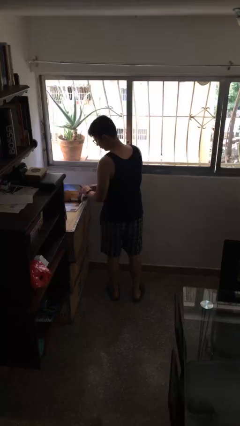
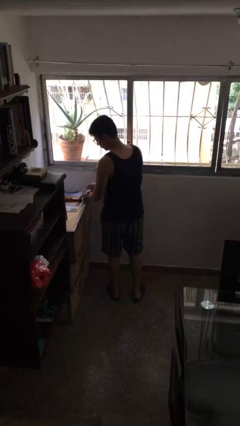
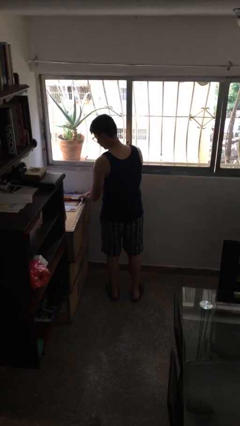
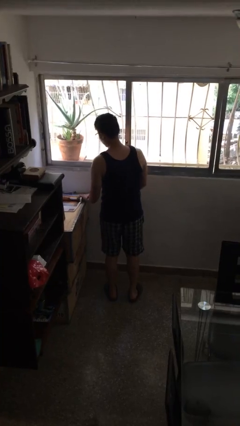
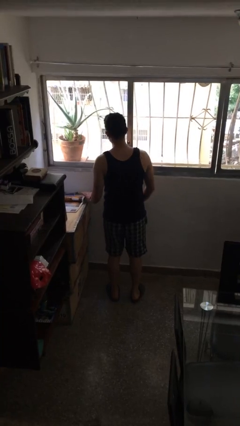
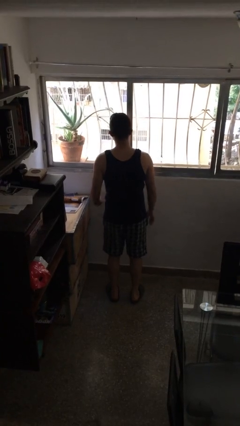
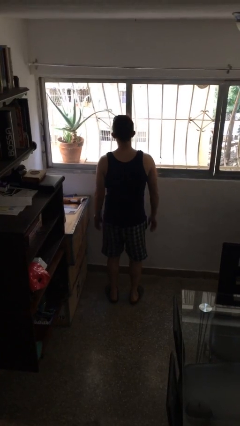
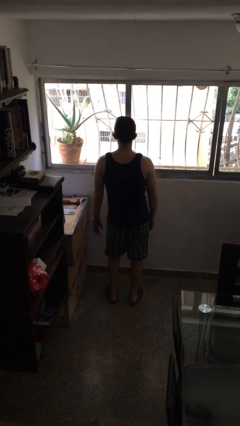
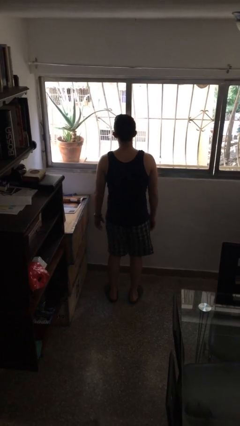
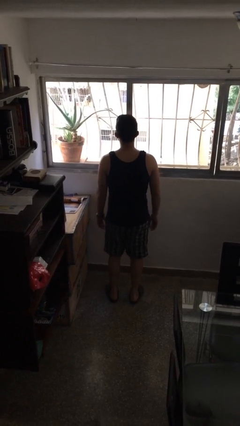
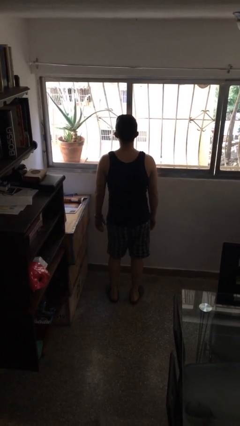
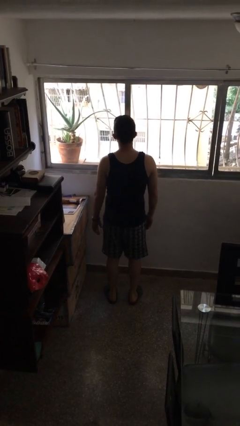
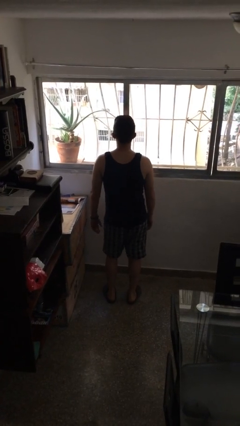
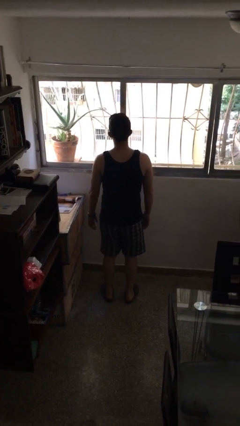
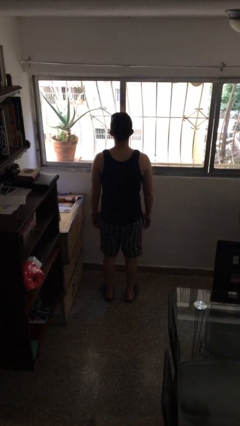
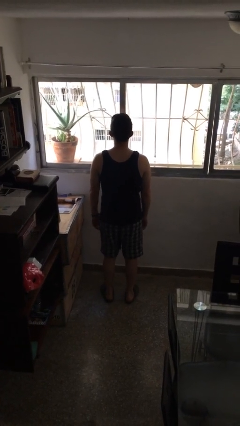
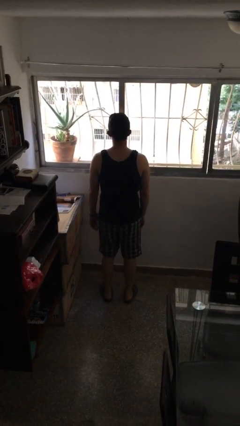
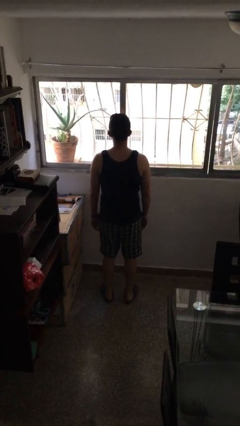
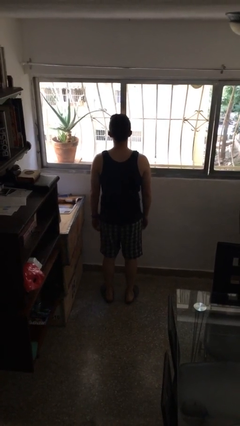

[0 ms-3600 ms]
person wiggles hips

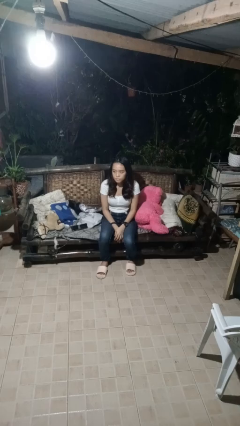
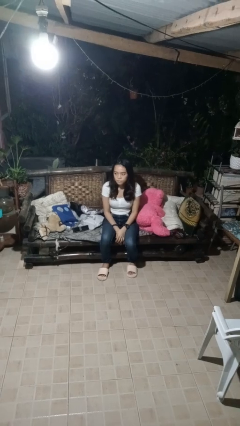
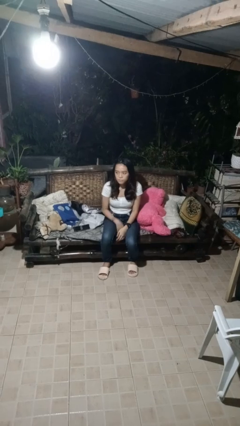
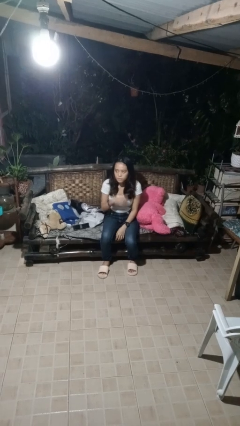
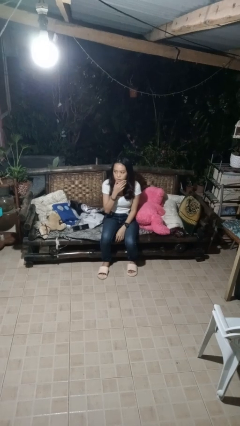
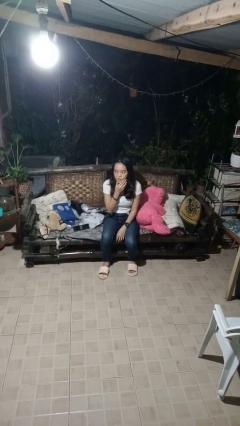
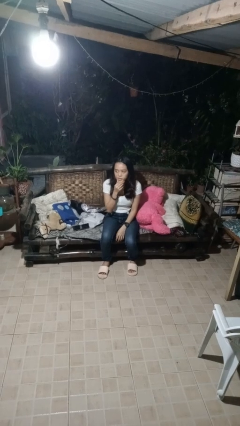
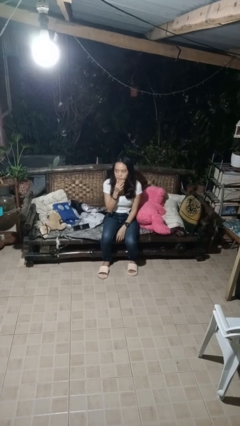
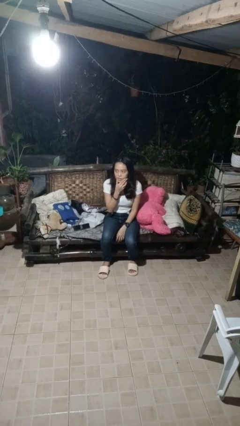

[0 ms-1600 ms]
person strokes chin

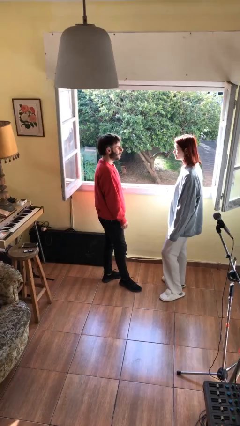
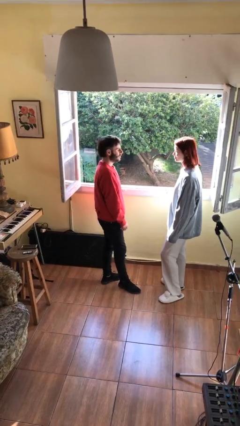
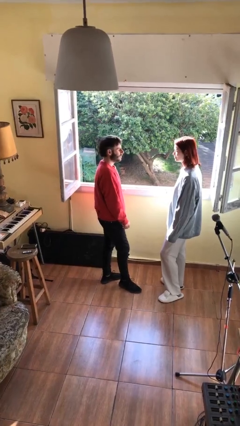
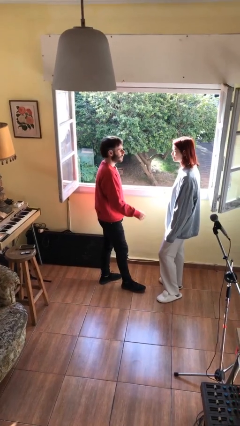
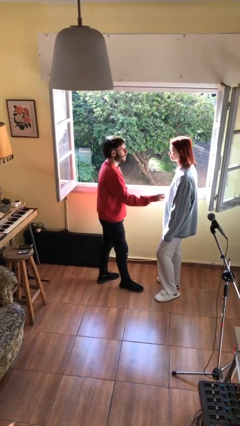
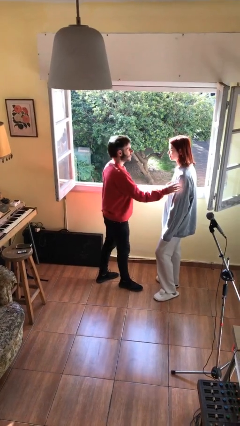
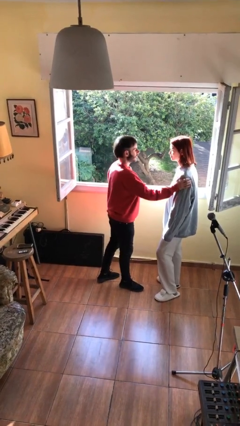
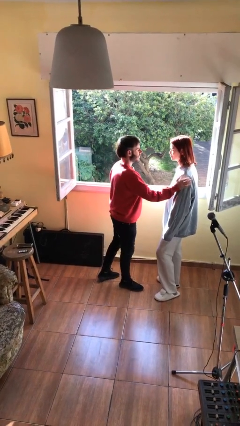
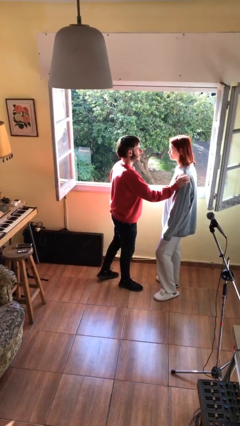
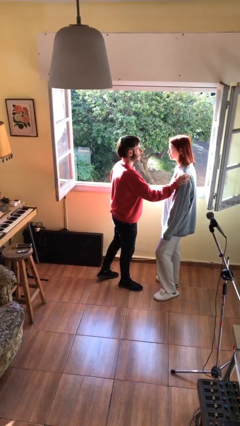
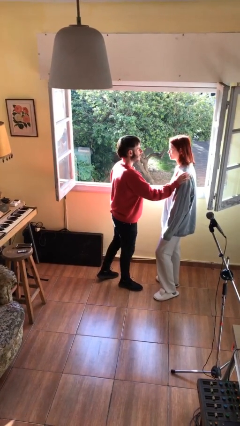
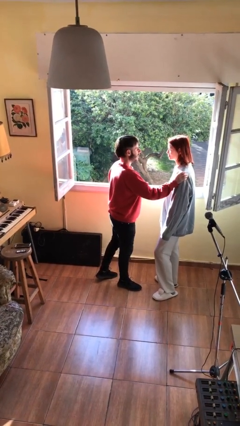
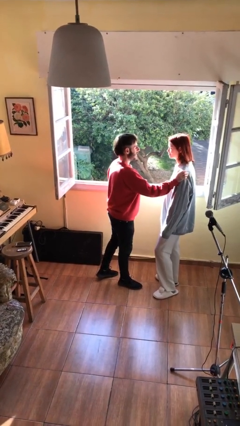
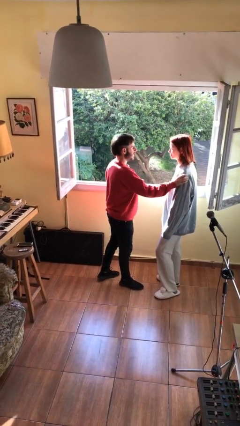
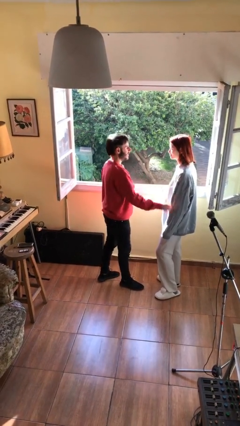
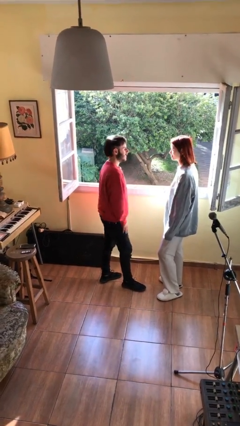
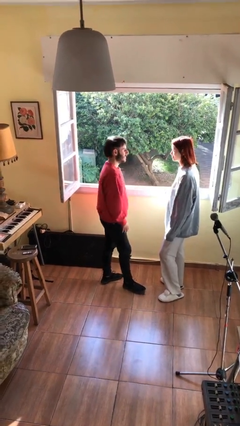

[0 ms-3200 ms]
person pounds shoulders of person

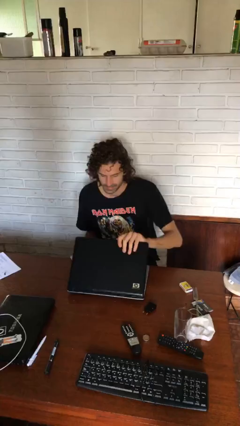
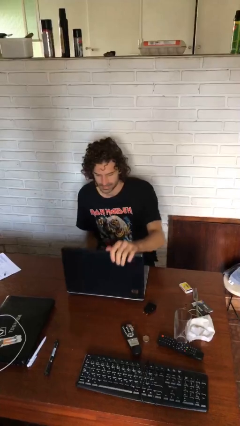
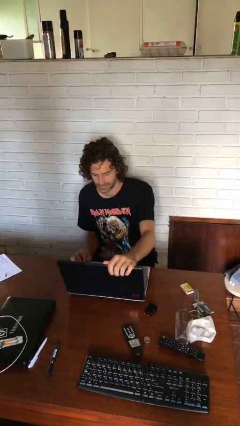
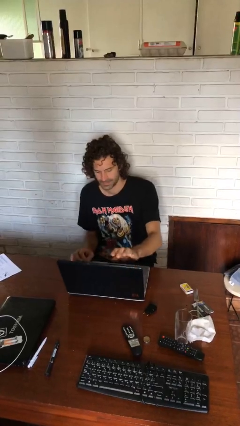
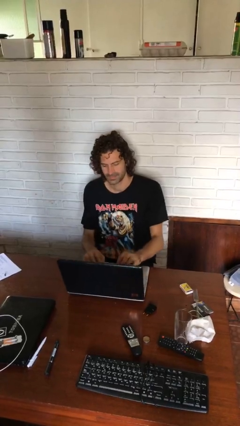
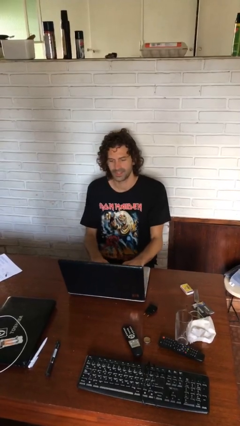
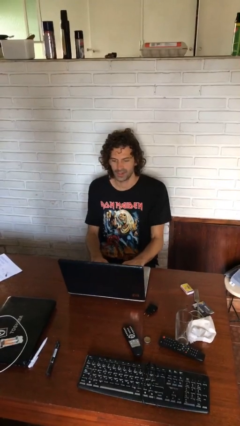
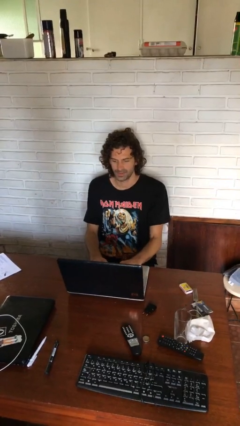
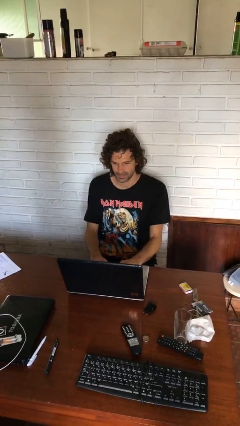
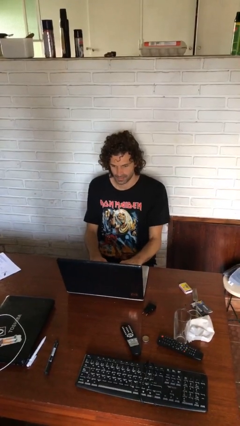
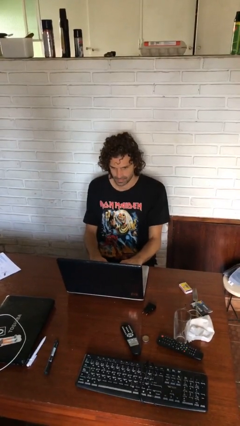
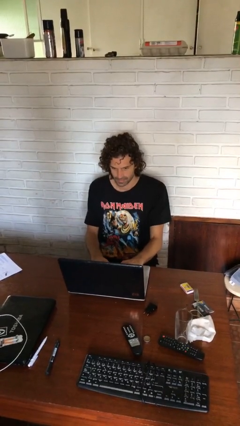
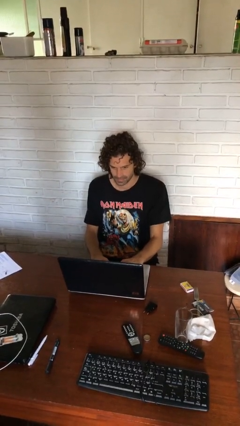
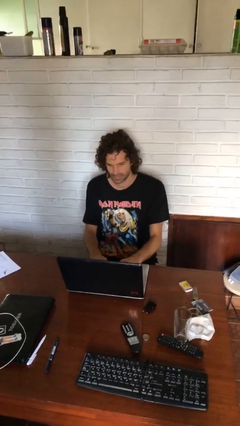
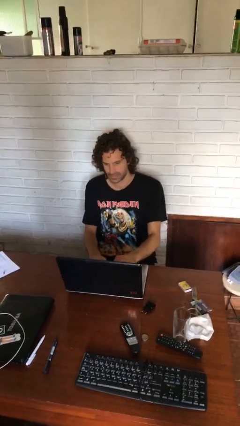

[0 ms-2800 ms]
person interacts with laptop

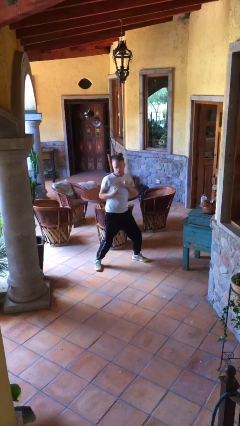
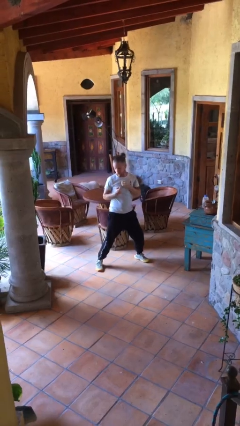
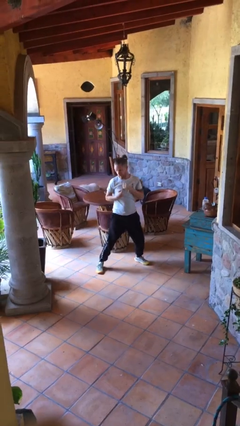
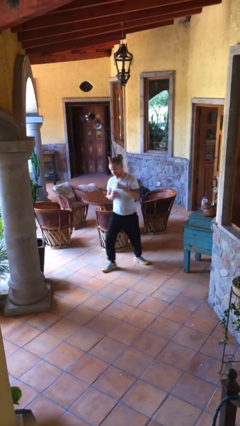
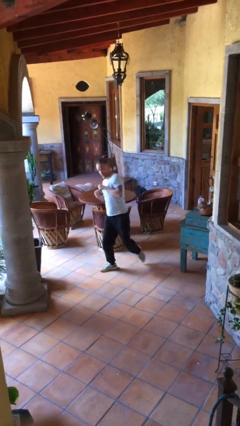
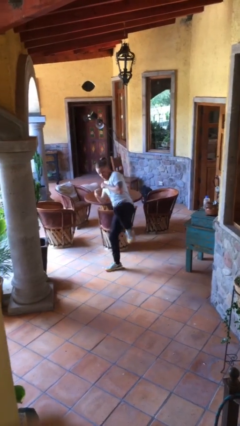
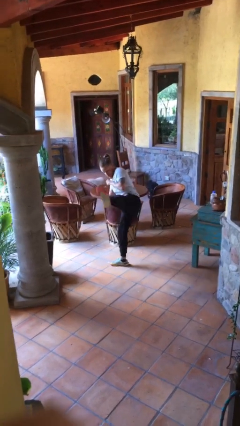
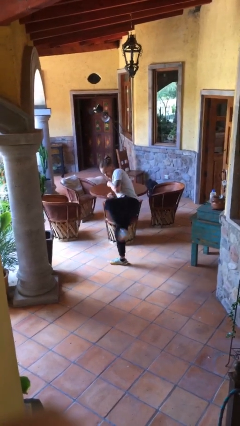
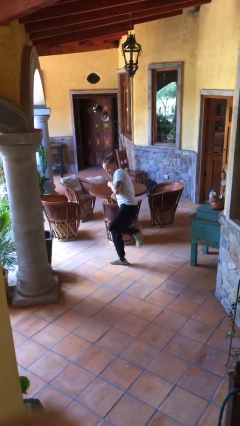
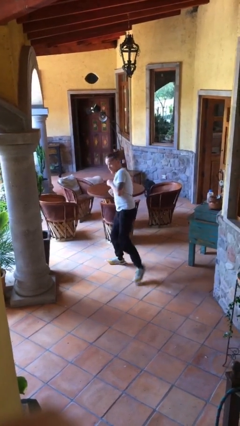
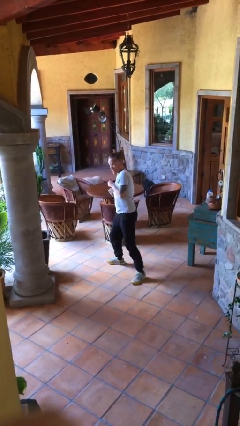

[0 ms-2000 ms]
person karate kicks

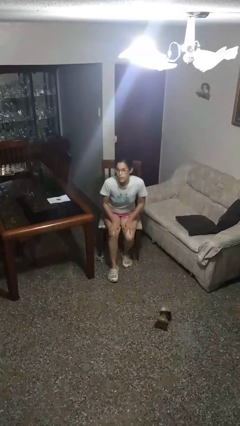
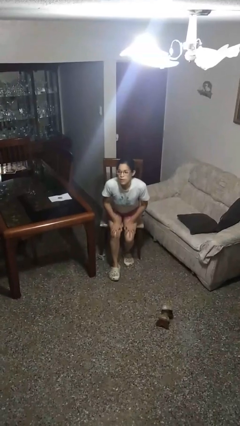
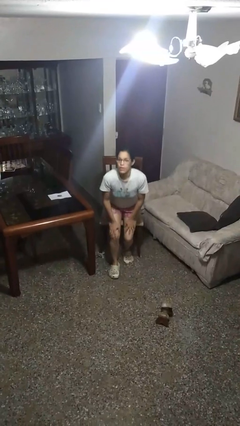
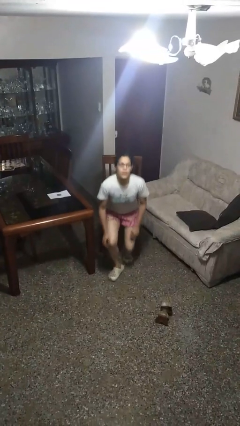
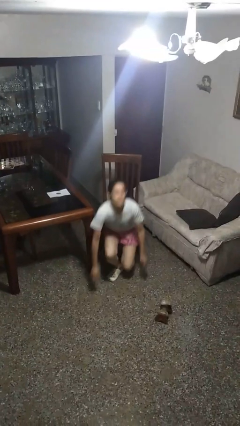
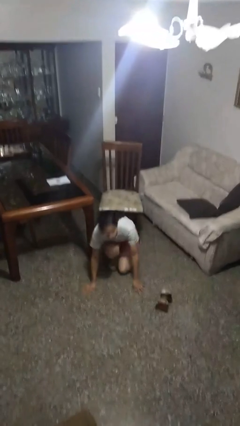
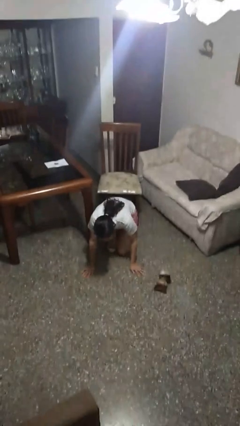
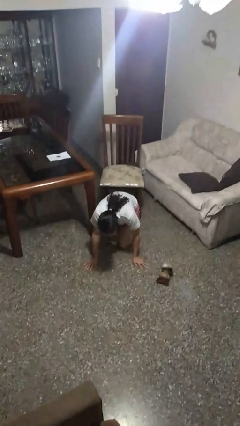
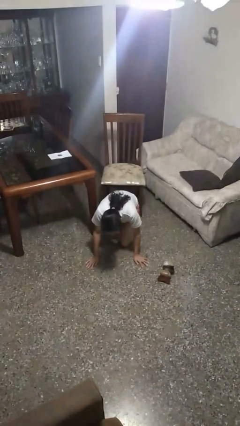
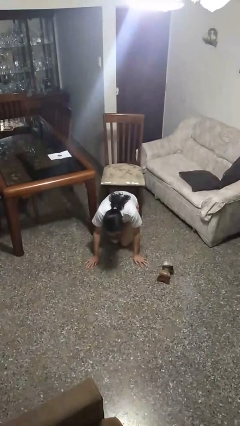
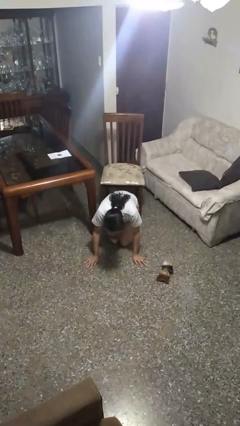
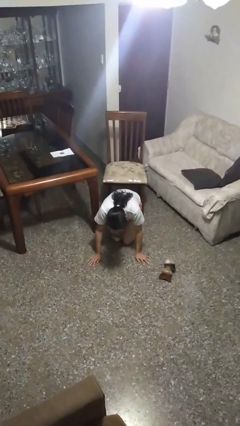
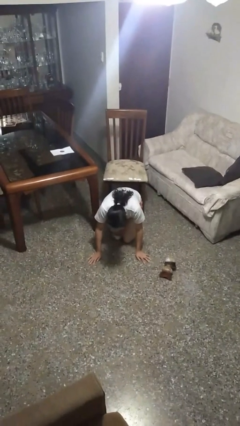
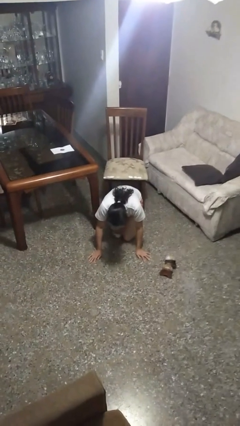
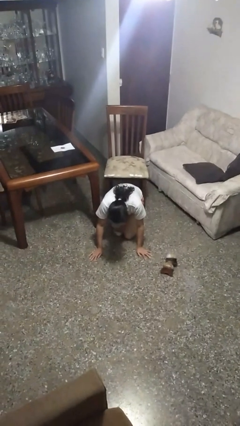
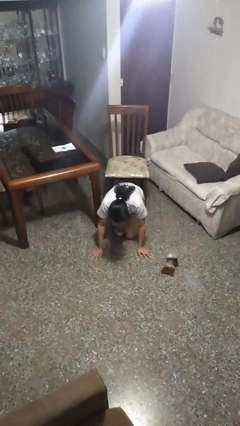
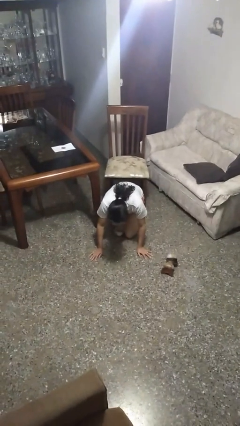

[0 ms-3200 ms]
person falls from chair

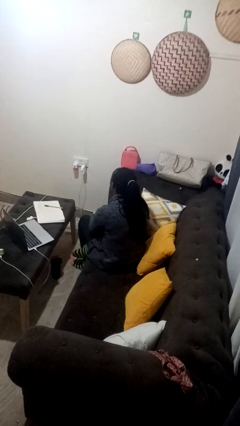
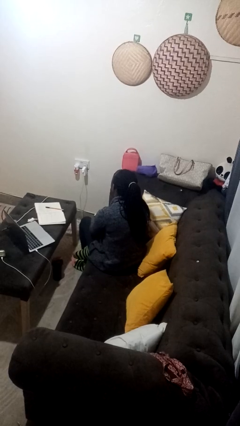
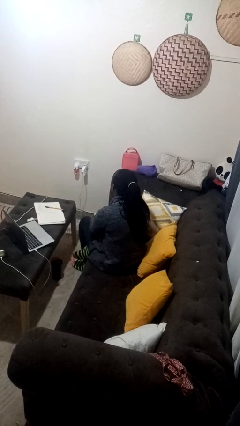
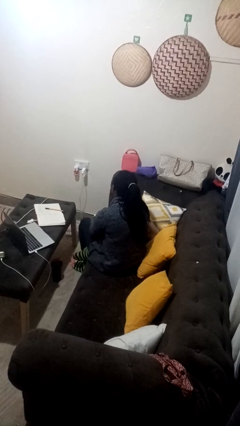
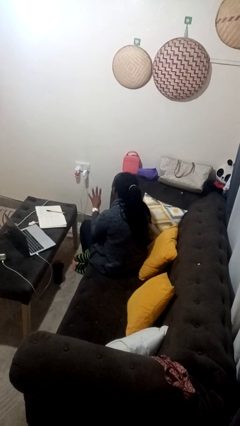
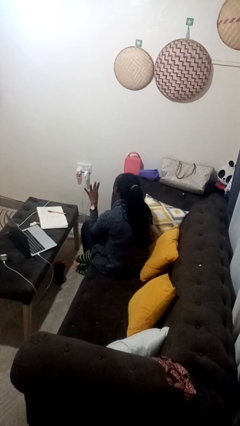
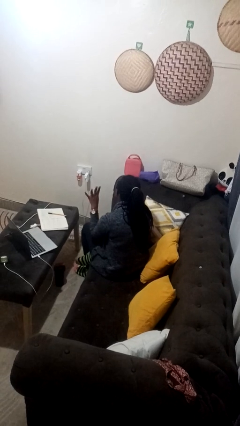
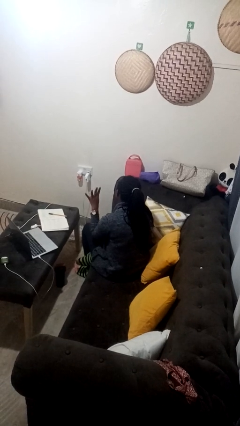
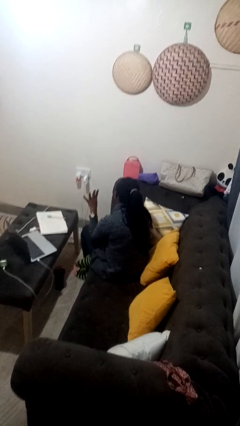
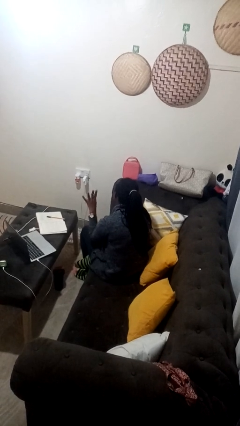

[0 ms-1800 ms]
person gestures number four
